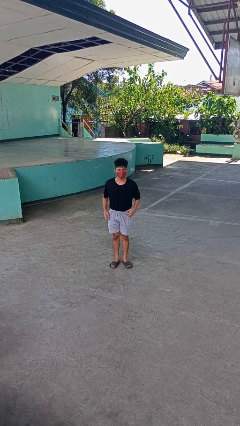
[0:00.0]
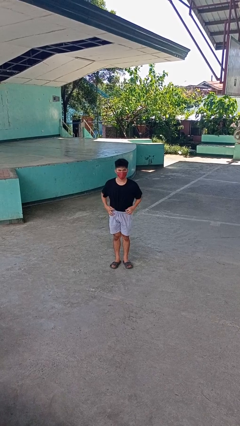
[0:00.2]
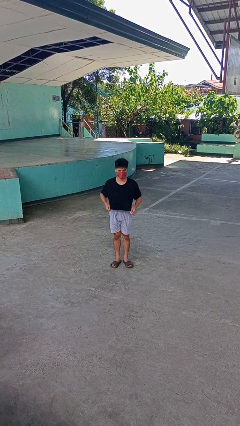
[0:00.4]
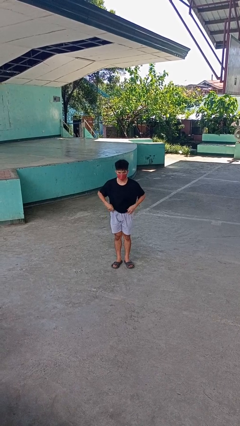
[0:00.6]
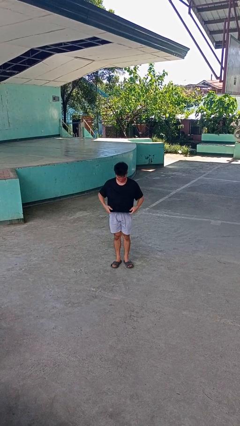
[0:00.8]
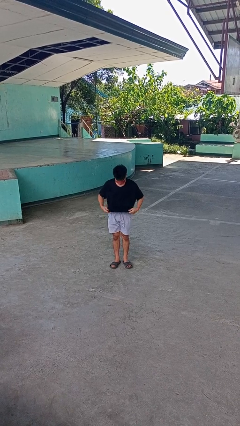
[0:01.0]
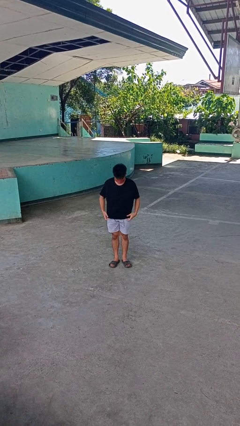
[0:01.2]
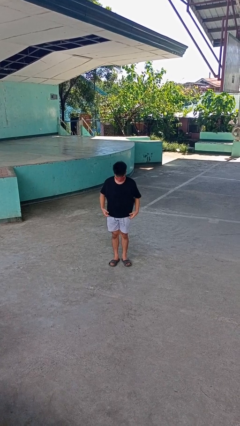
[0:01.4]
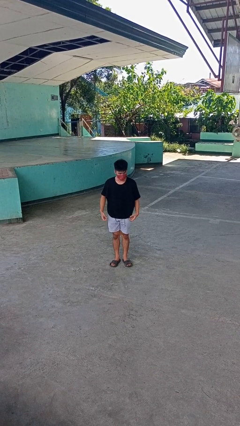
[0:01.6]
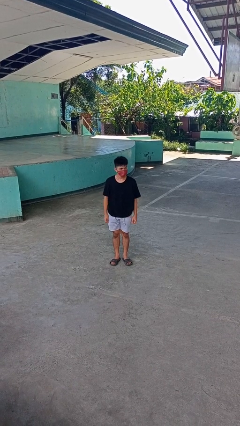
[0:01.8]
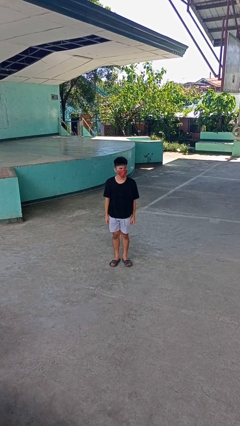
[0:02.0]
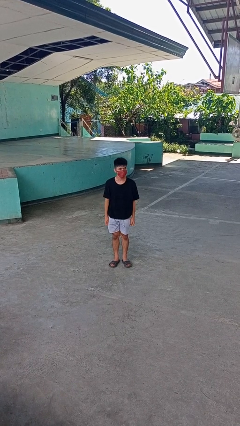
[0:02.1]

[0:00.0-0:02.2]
person untucks shirt

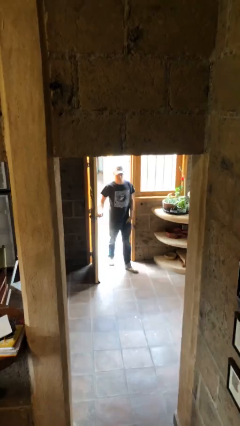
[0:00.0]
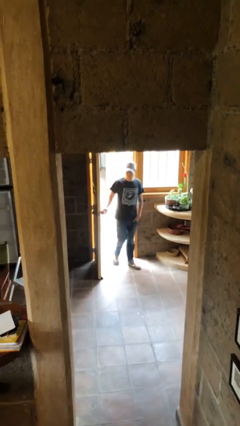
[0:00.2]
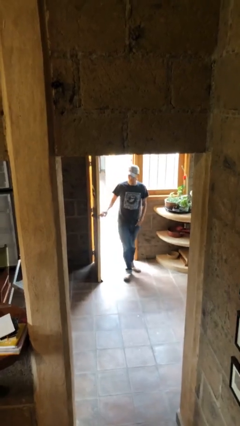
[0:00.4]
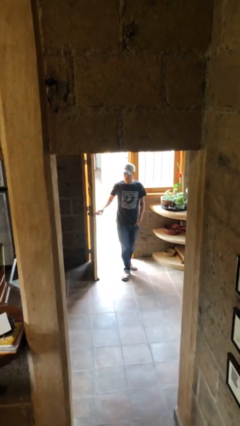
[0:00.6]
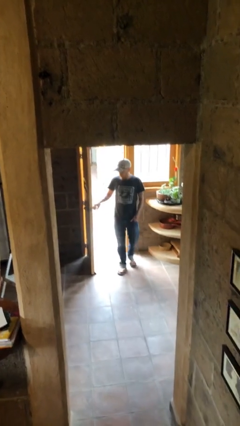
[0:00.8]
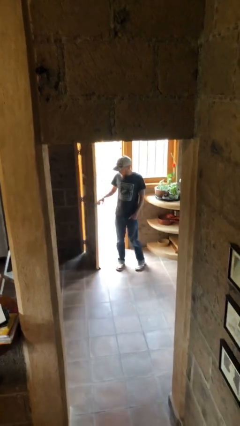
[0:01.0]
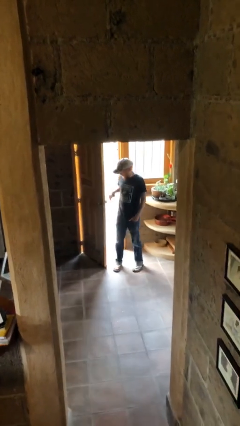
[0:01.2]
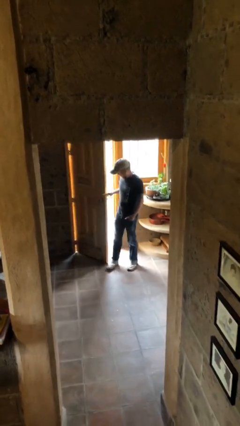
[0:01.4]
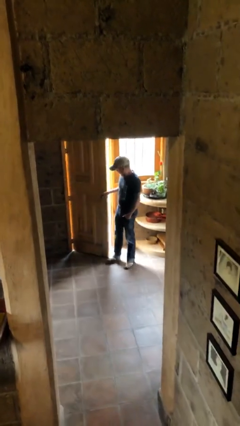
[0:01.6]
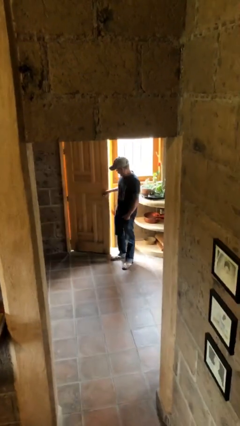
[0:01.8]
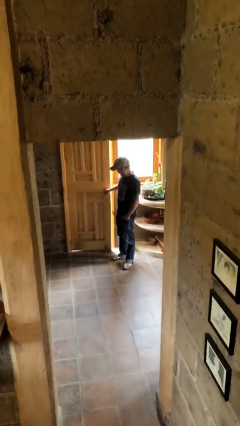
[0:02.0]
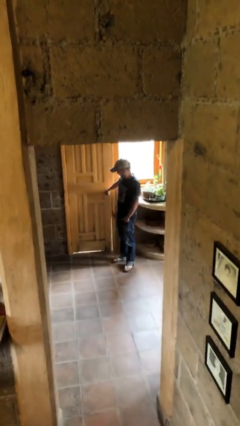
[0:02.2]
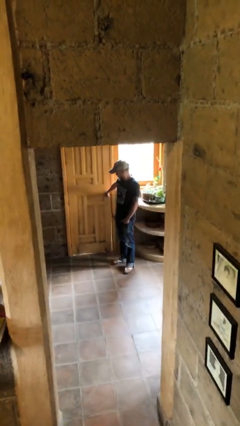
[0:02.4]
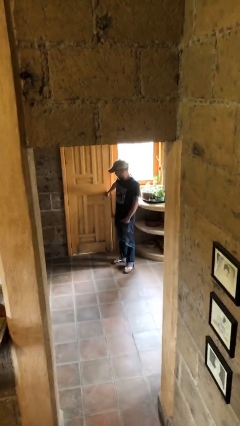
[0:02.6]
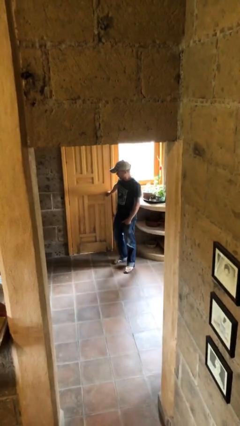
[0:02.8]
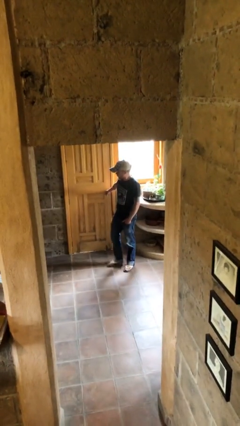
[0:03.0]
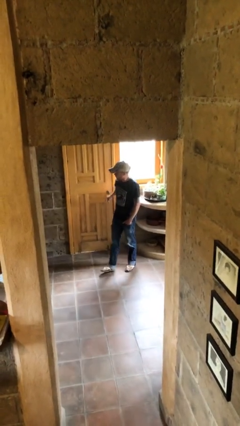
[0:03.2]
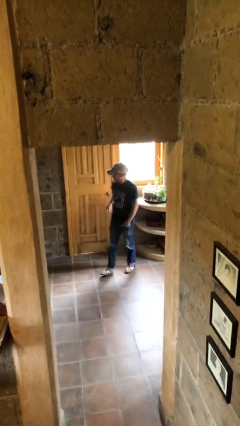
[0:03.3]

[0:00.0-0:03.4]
person closes facility door

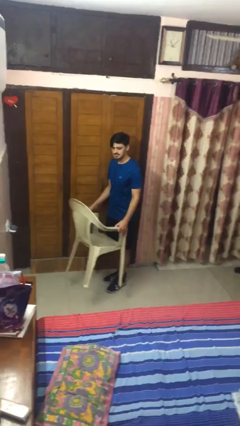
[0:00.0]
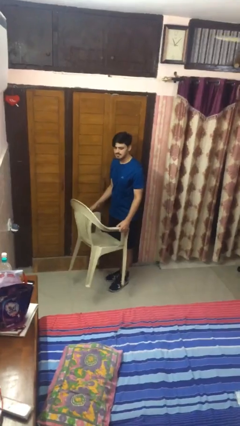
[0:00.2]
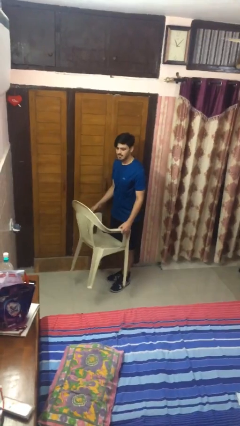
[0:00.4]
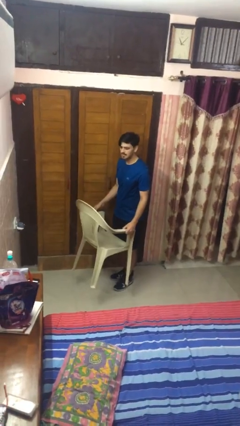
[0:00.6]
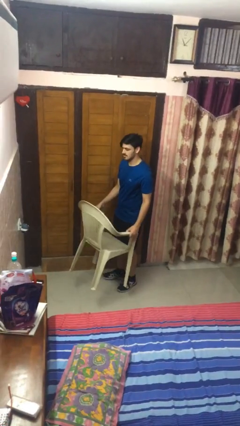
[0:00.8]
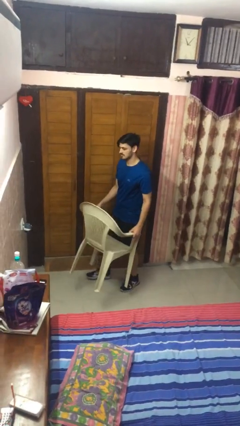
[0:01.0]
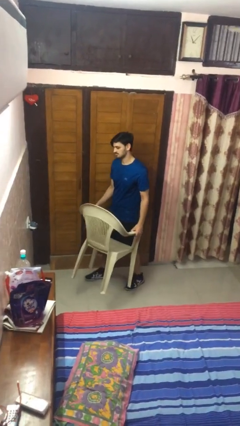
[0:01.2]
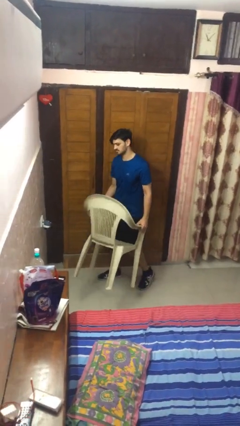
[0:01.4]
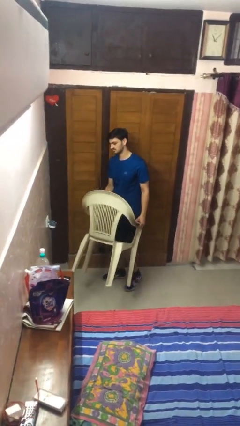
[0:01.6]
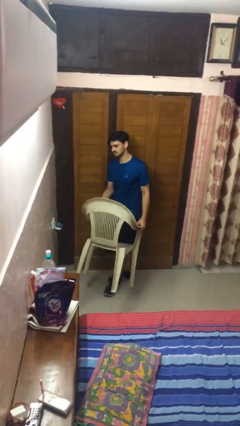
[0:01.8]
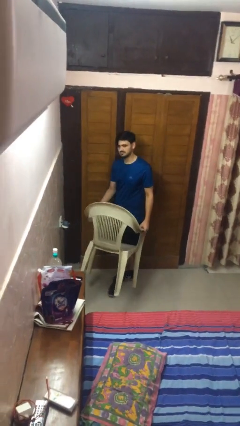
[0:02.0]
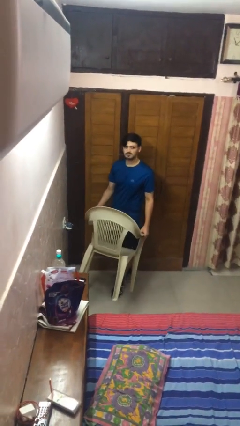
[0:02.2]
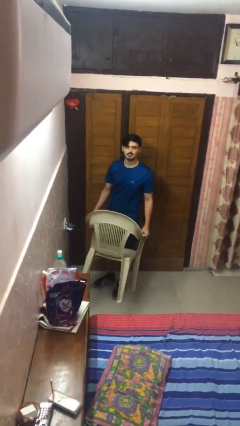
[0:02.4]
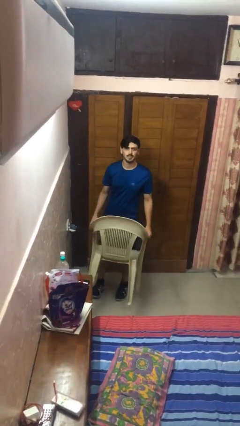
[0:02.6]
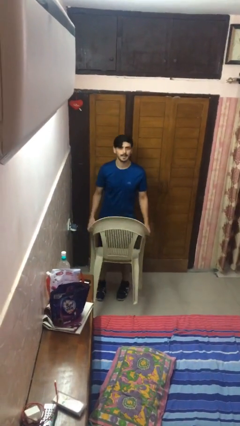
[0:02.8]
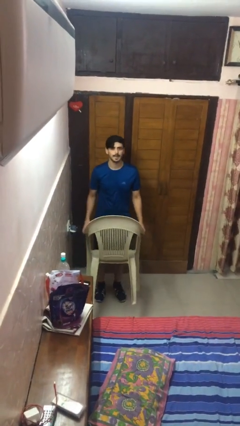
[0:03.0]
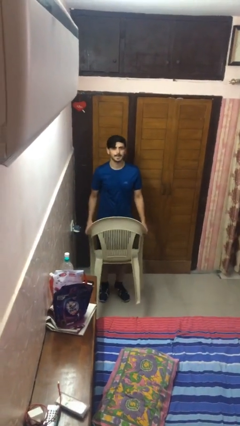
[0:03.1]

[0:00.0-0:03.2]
person carries furniture

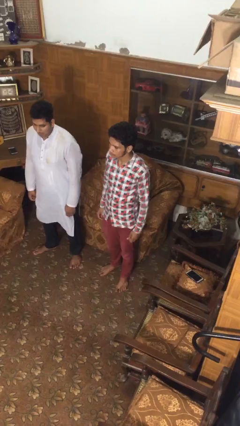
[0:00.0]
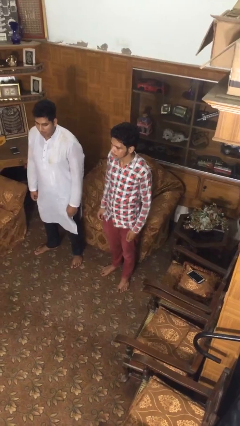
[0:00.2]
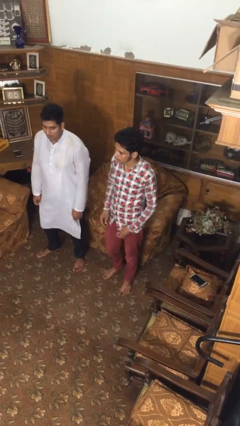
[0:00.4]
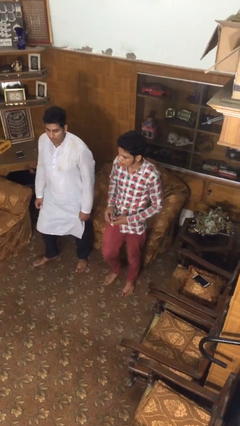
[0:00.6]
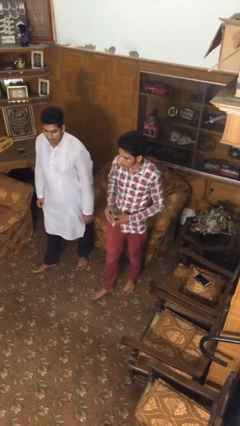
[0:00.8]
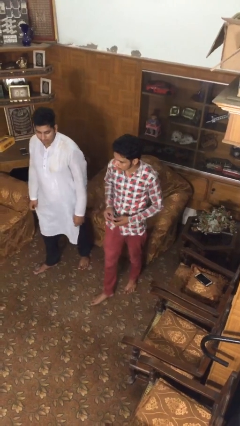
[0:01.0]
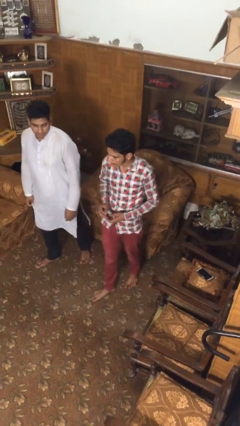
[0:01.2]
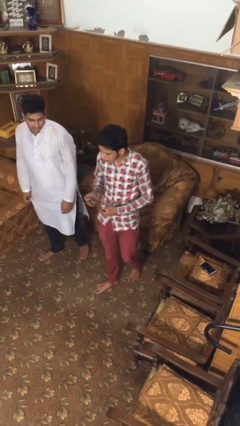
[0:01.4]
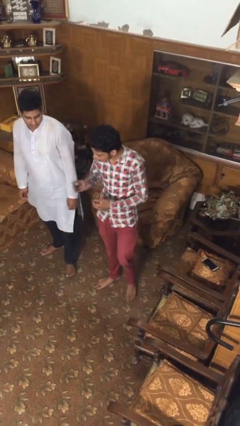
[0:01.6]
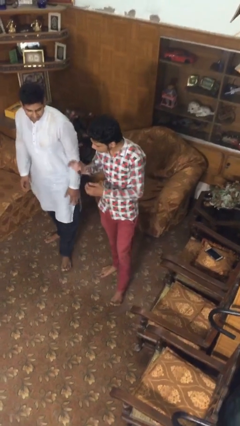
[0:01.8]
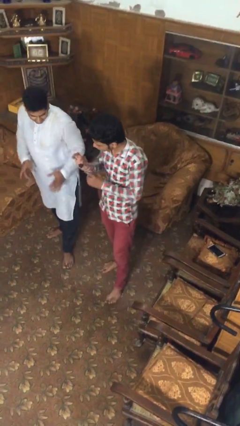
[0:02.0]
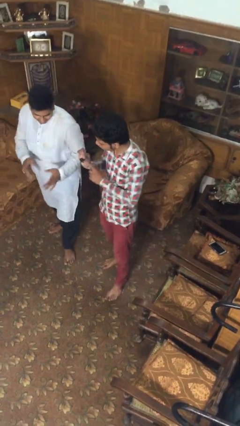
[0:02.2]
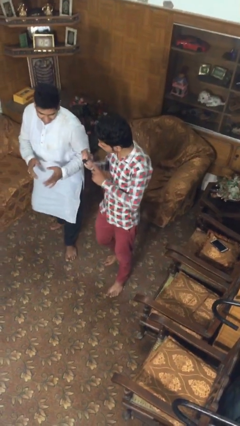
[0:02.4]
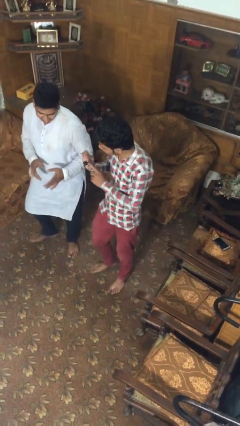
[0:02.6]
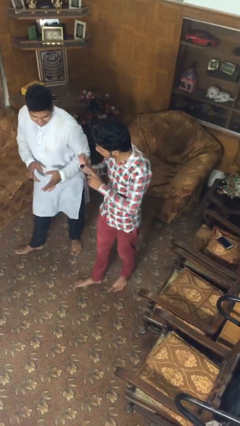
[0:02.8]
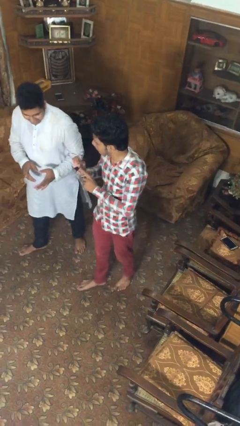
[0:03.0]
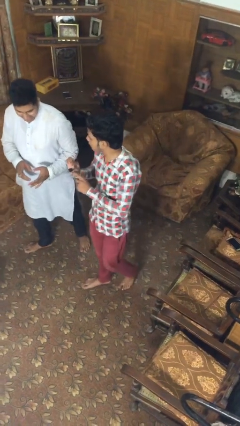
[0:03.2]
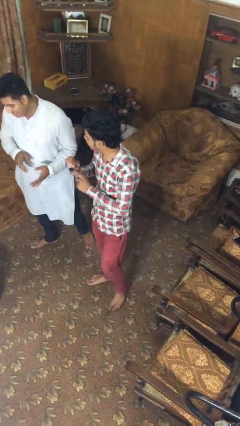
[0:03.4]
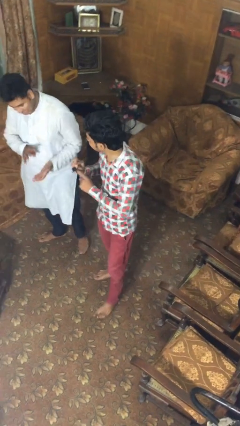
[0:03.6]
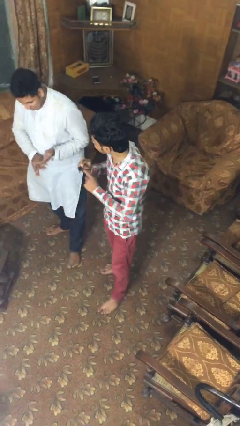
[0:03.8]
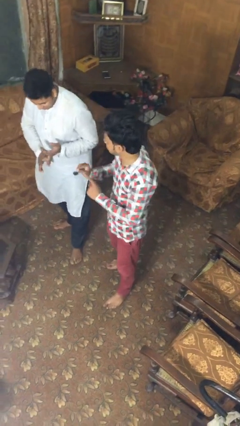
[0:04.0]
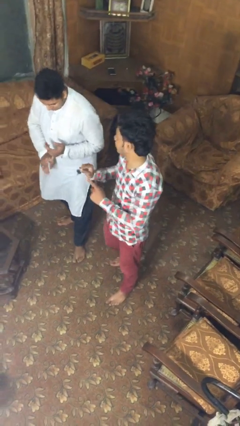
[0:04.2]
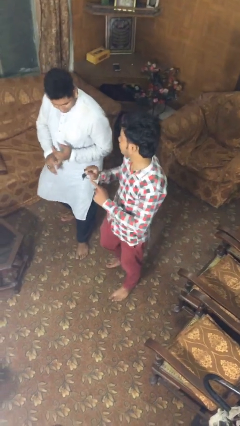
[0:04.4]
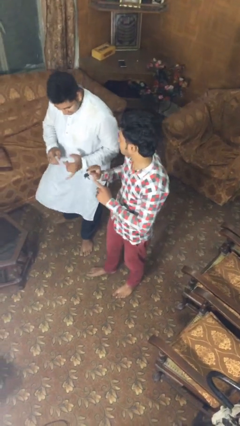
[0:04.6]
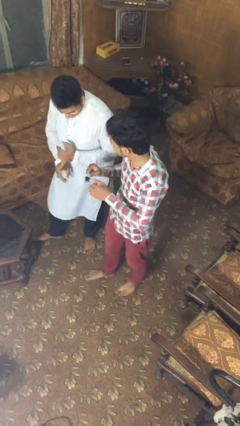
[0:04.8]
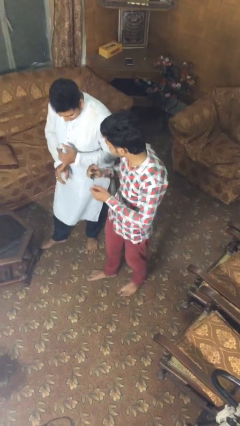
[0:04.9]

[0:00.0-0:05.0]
person talks to person

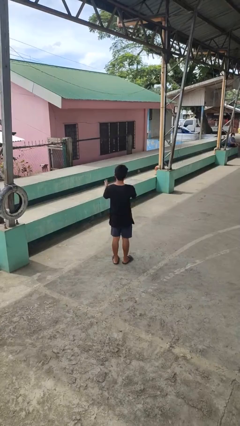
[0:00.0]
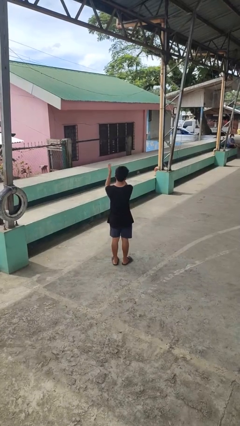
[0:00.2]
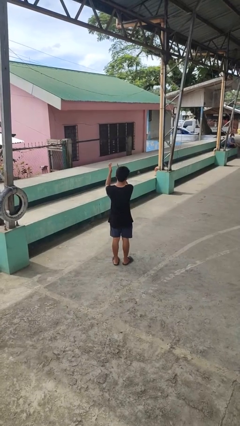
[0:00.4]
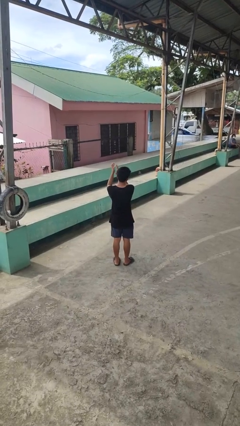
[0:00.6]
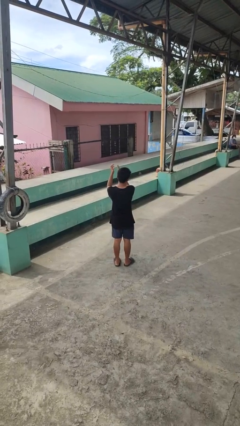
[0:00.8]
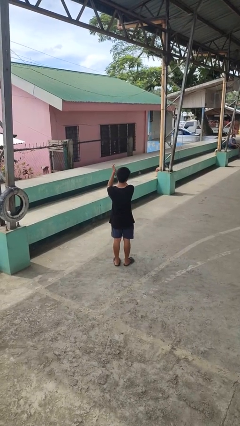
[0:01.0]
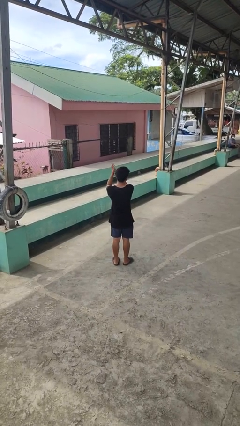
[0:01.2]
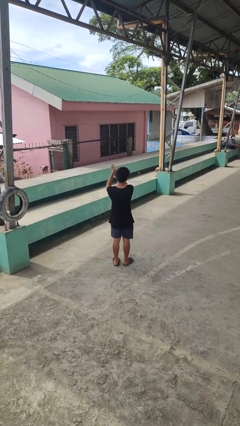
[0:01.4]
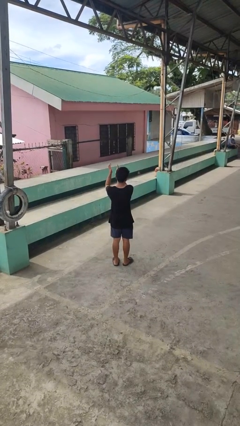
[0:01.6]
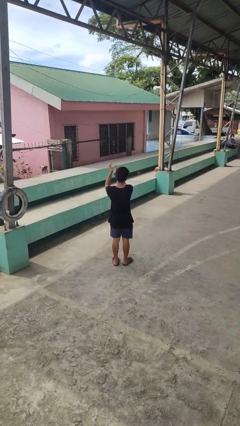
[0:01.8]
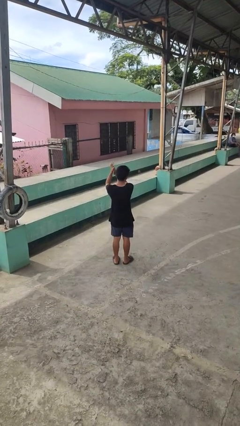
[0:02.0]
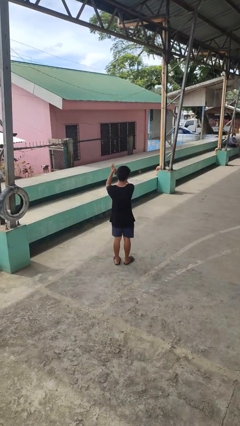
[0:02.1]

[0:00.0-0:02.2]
person claps hands

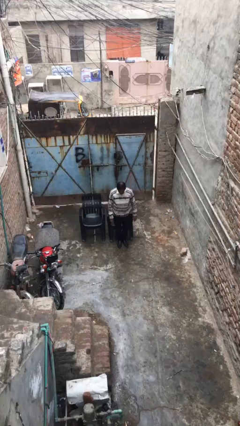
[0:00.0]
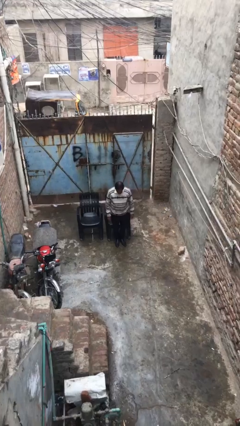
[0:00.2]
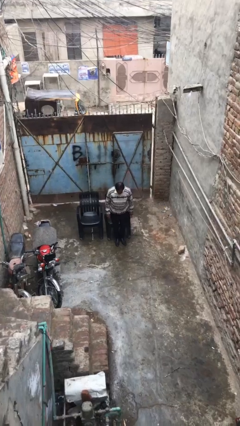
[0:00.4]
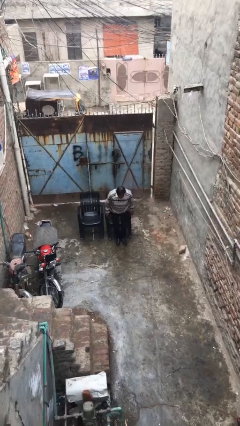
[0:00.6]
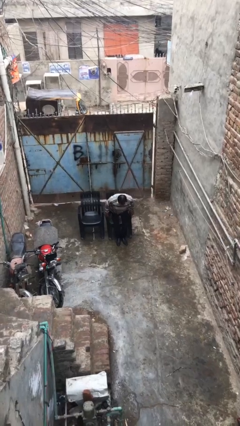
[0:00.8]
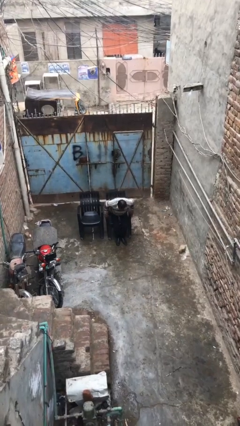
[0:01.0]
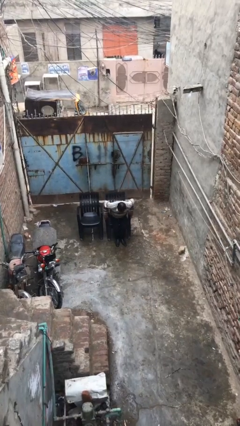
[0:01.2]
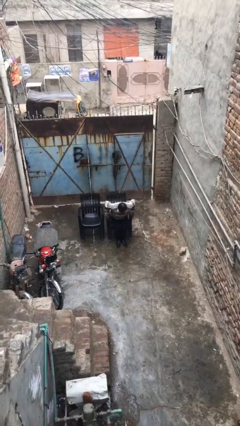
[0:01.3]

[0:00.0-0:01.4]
person sits down
